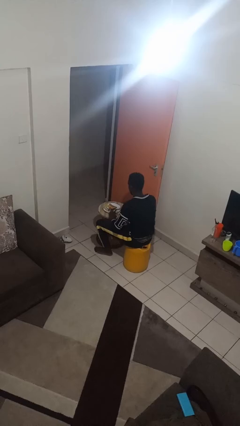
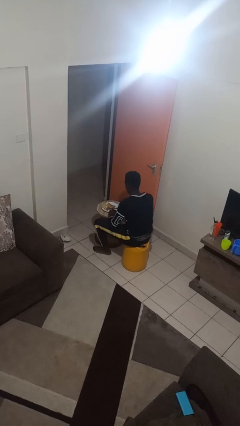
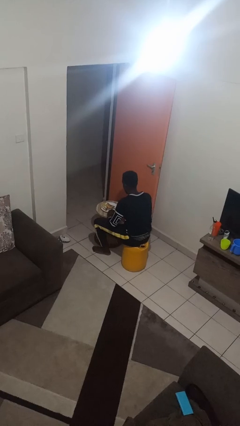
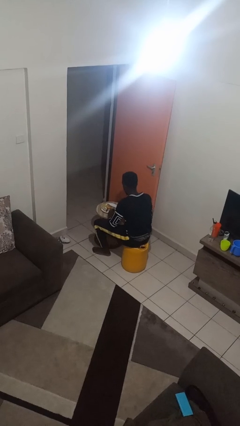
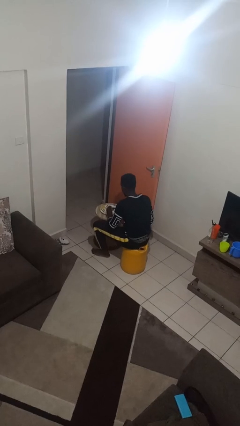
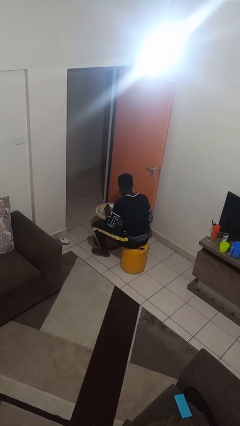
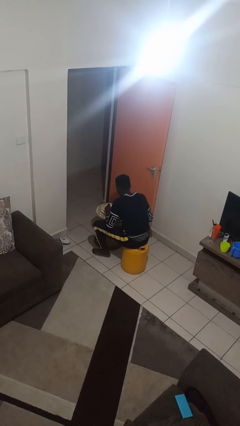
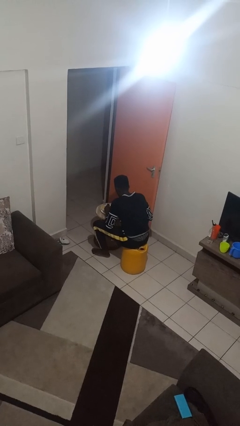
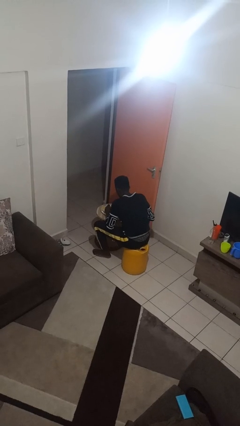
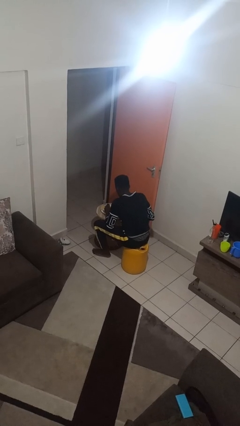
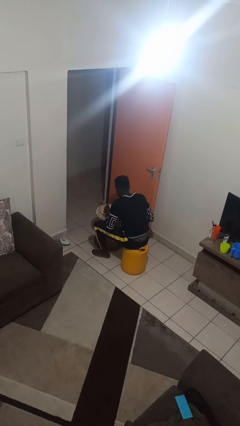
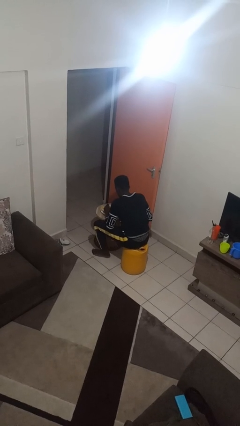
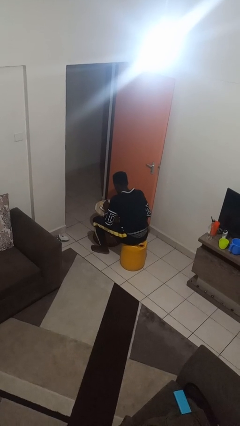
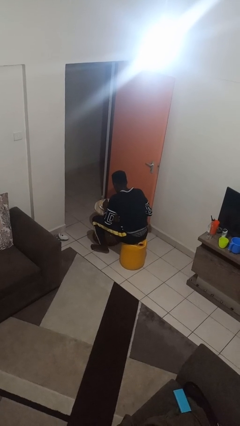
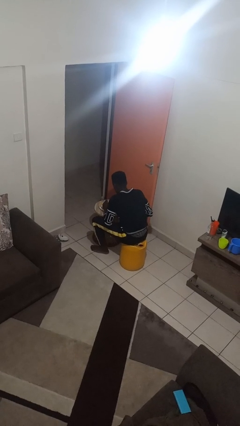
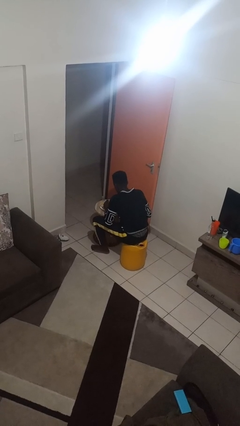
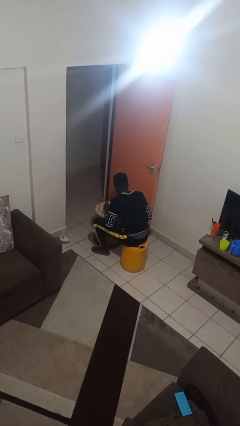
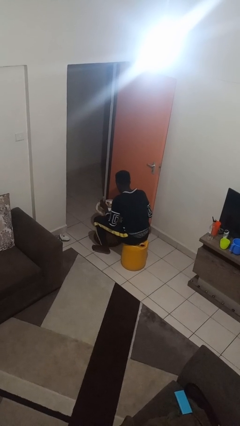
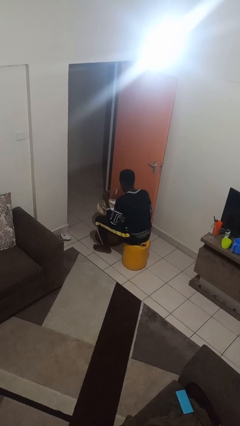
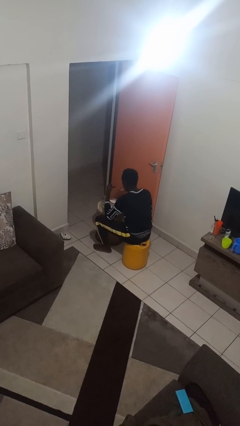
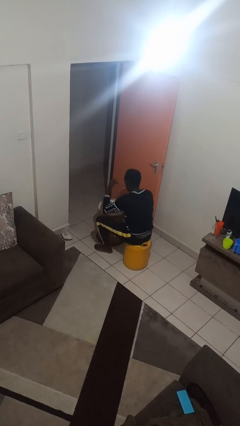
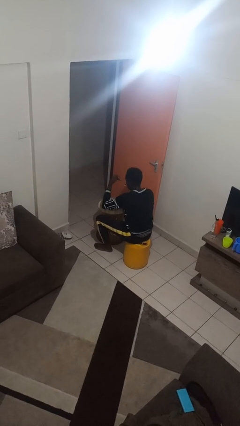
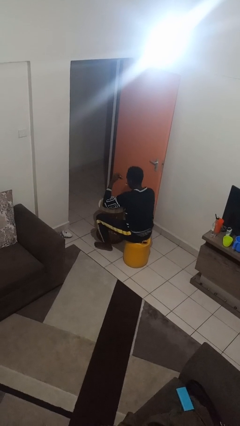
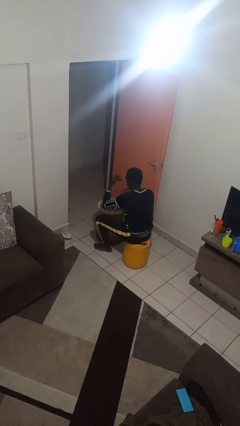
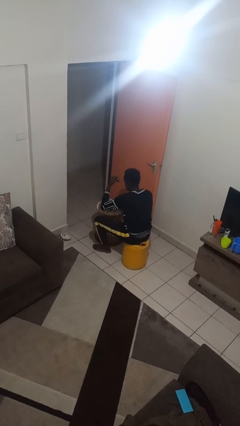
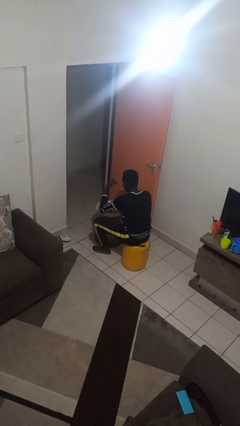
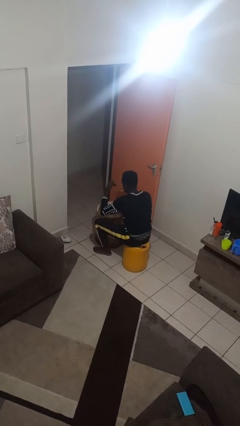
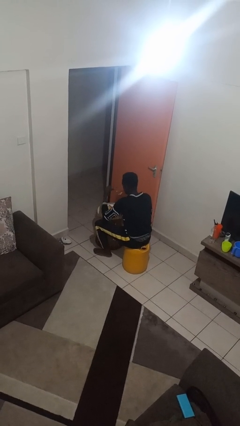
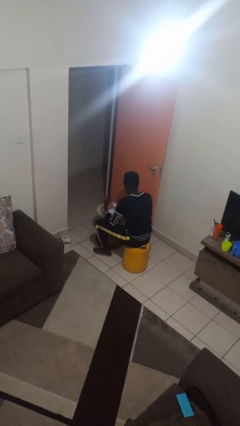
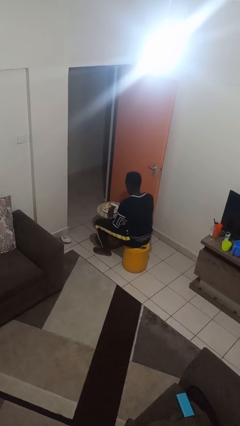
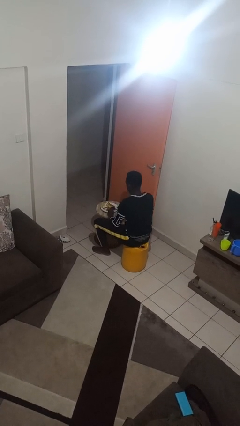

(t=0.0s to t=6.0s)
person eats with utensil

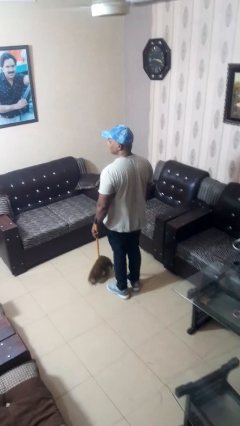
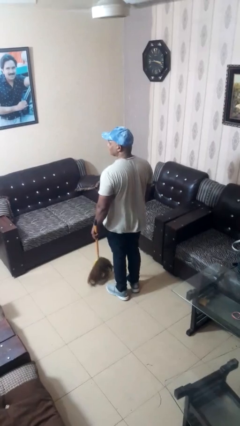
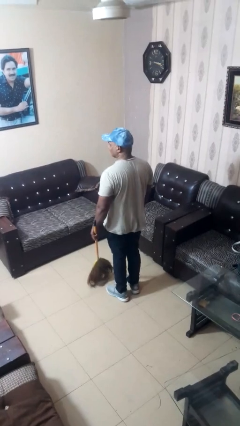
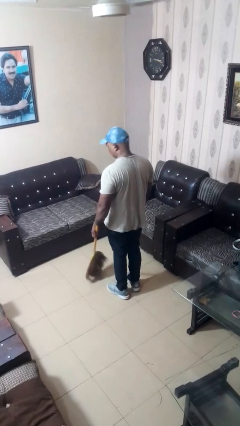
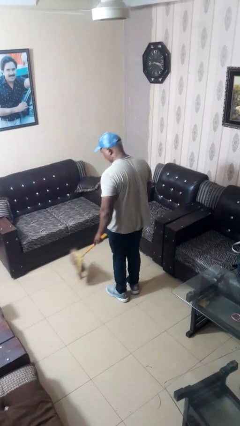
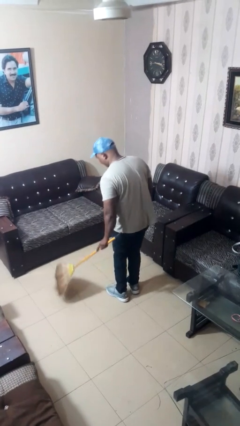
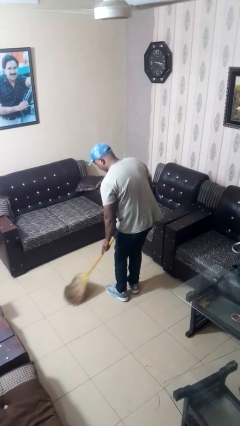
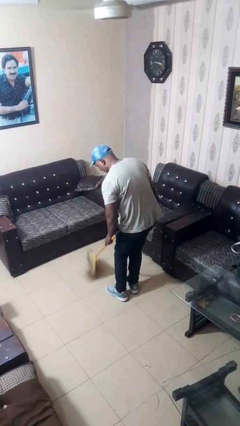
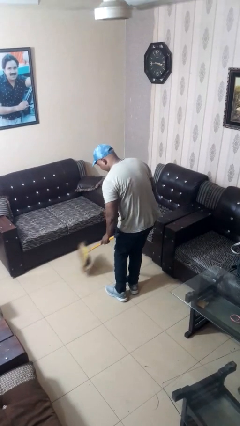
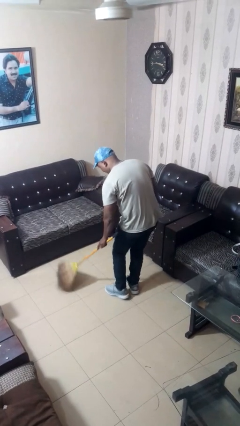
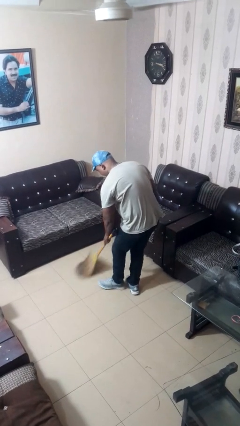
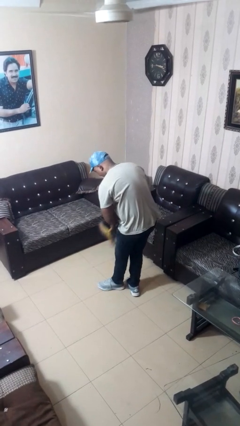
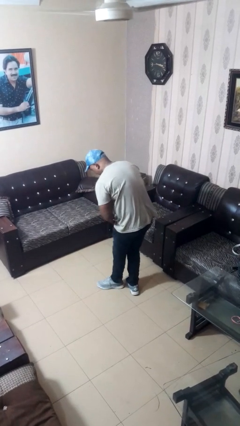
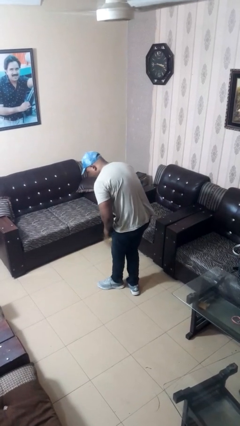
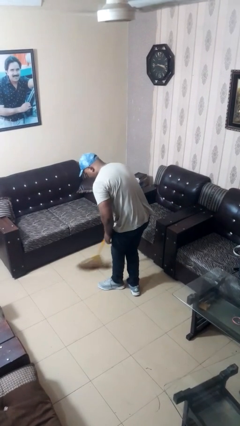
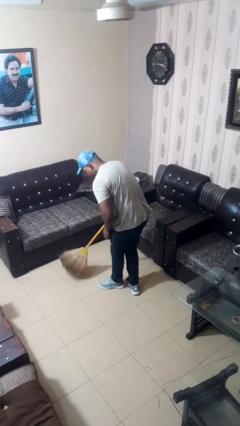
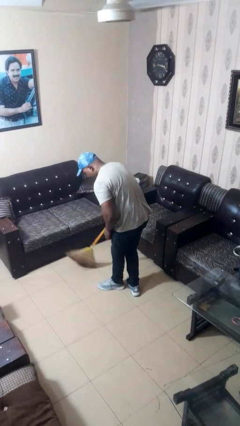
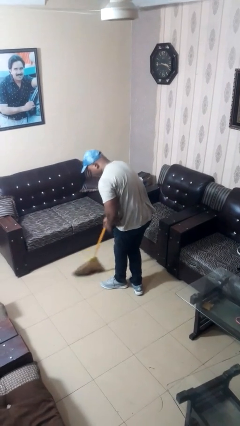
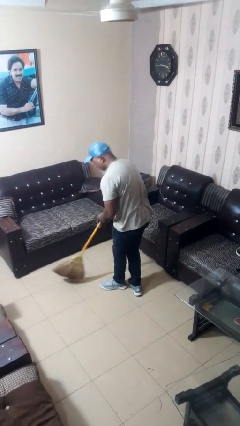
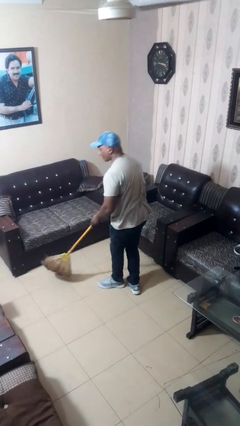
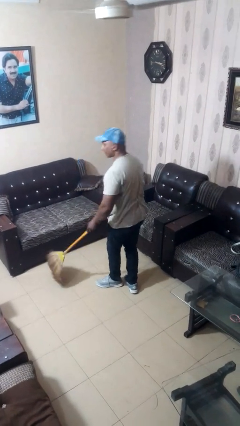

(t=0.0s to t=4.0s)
person sweeps floor

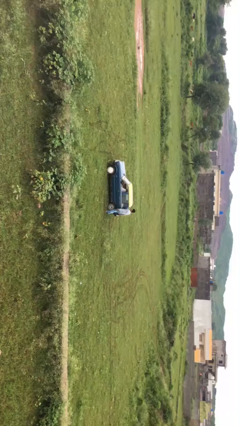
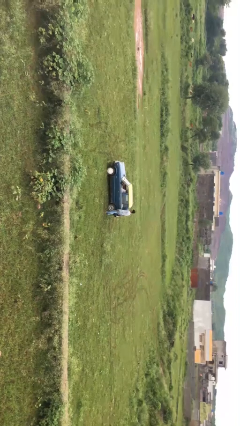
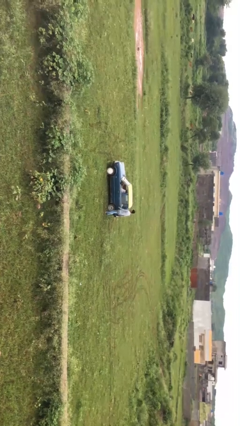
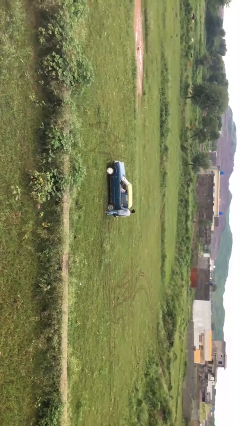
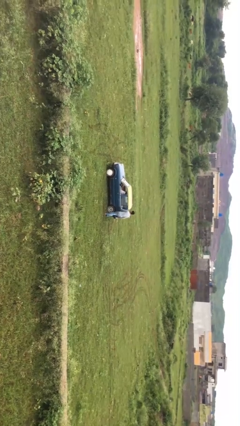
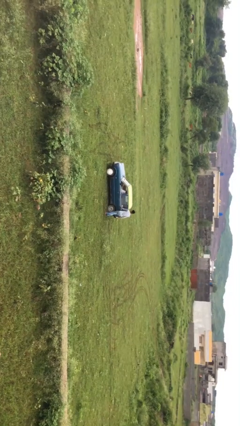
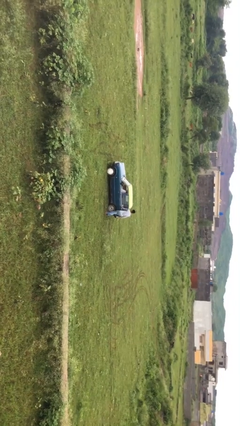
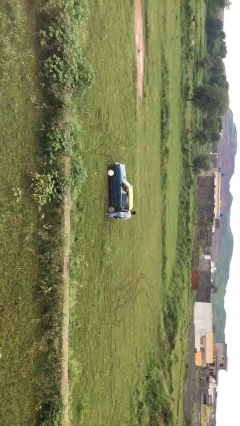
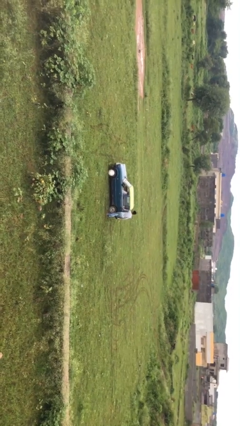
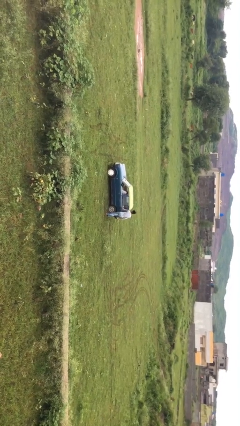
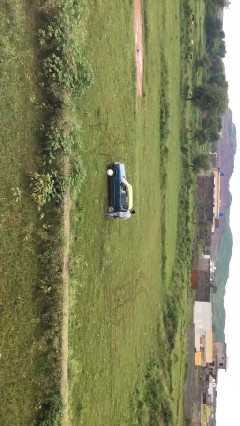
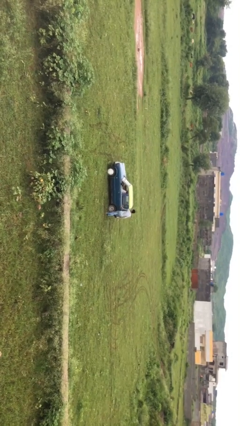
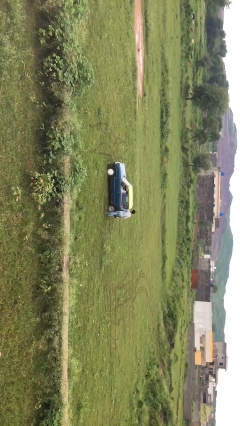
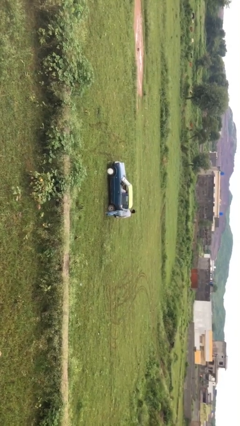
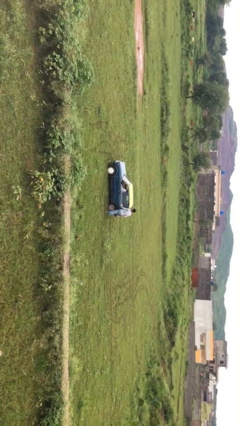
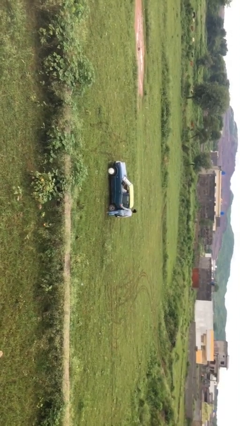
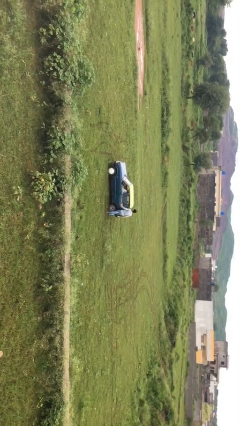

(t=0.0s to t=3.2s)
person opens car door

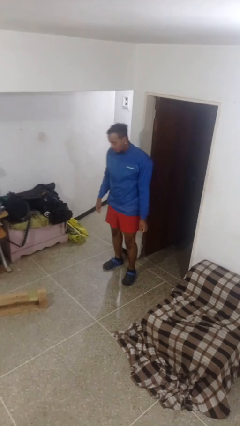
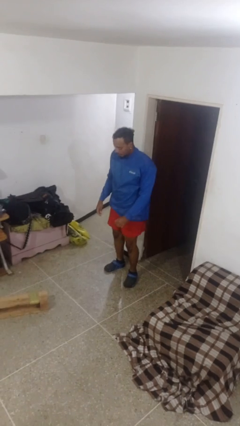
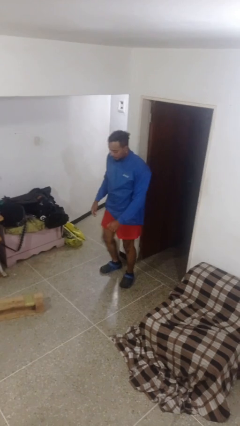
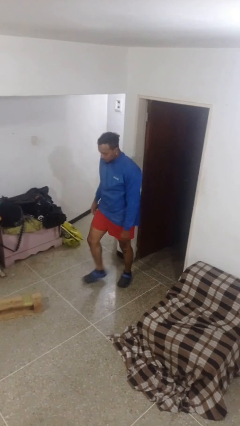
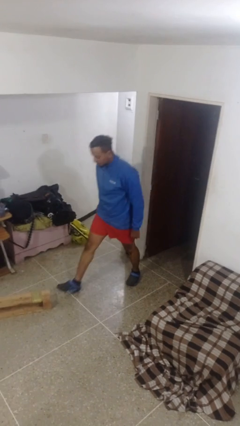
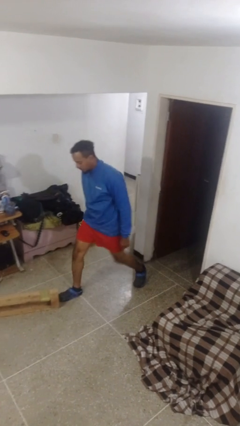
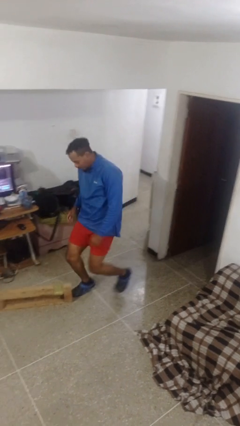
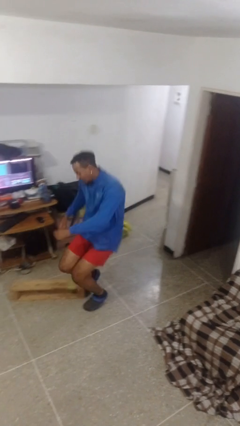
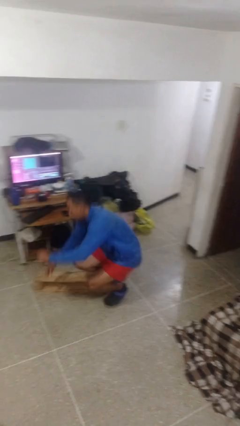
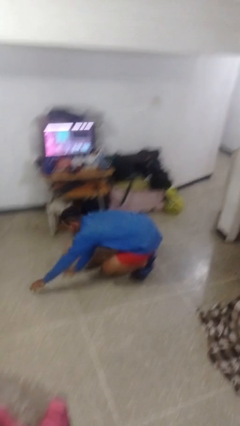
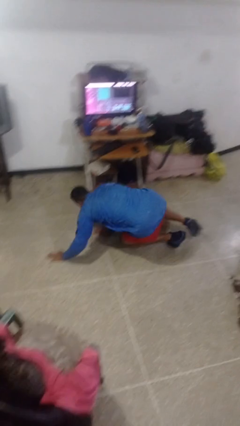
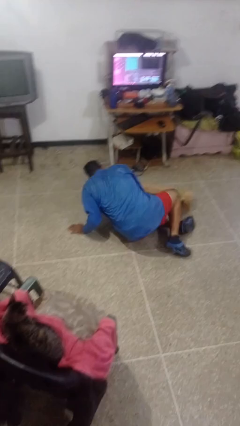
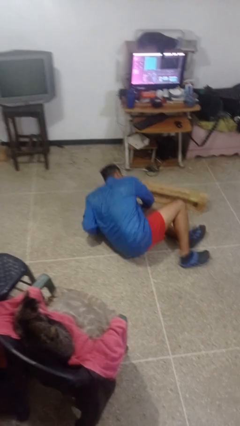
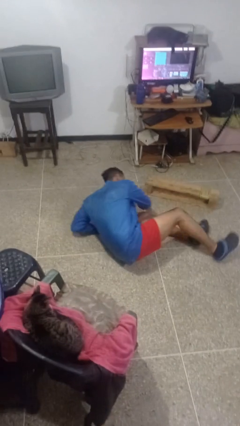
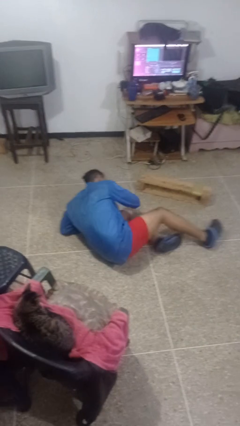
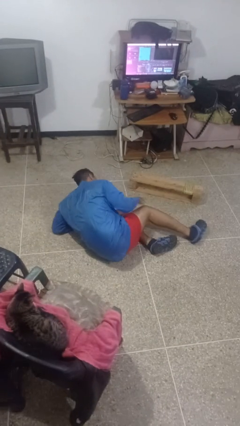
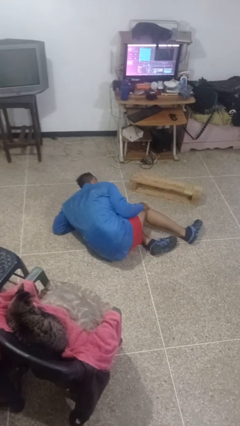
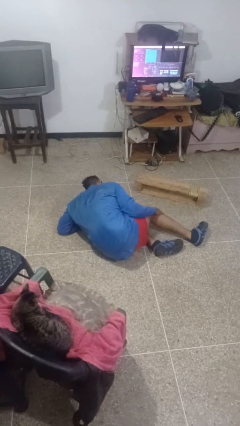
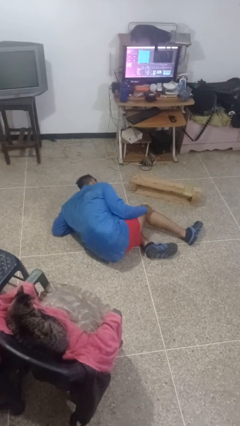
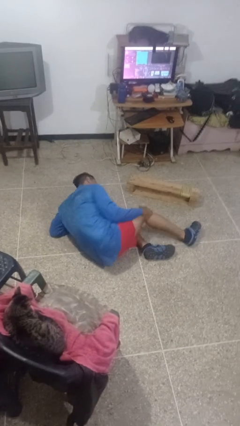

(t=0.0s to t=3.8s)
person trips on object on floor

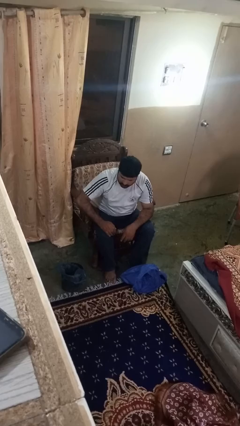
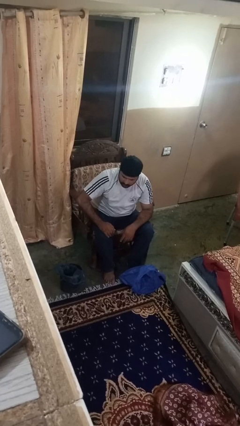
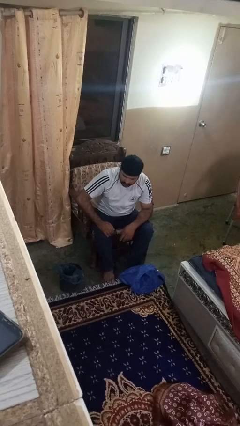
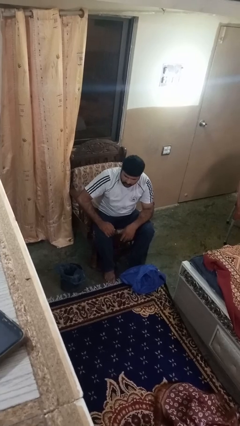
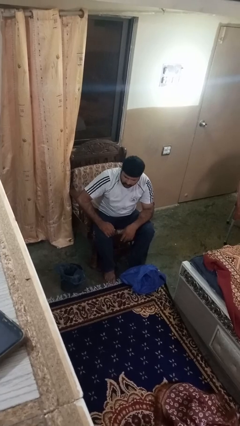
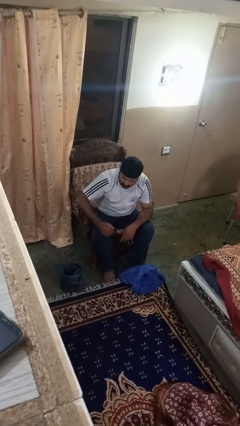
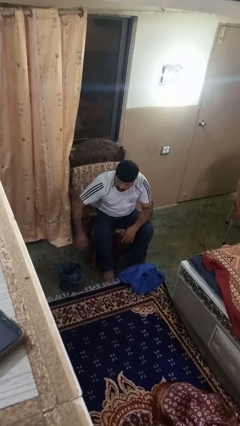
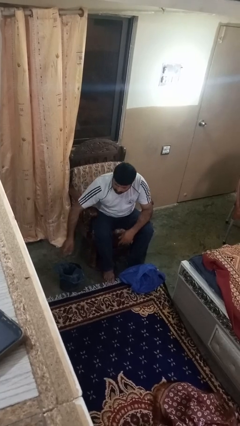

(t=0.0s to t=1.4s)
person removes trashbag from trashcan
